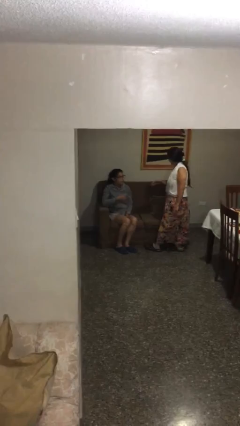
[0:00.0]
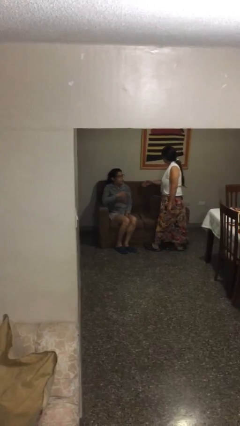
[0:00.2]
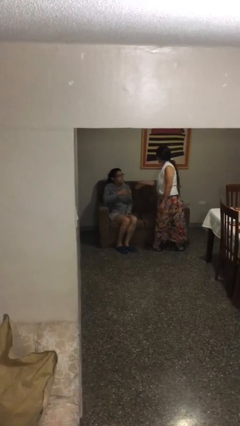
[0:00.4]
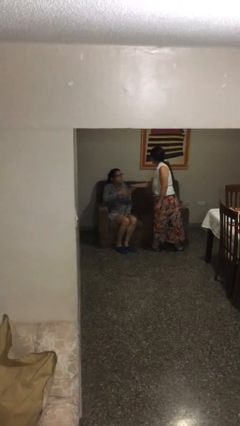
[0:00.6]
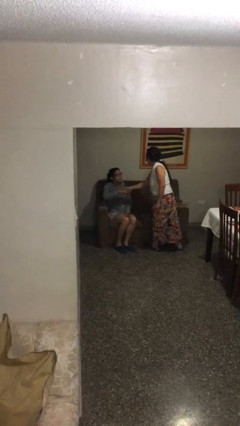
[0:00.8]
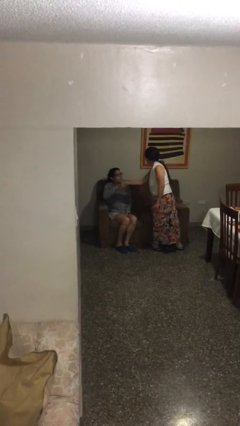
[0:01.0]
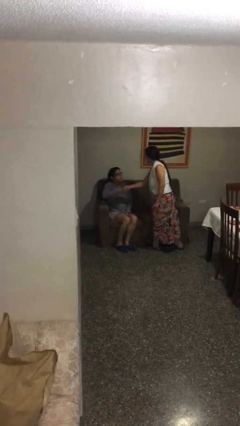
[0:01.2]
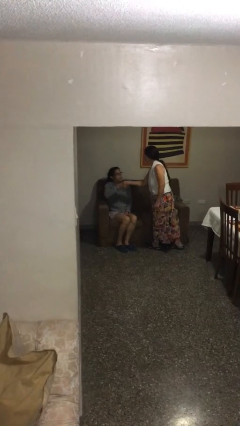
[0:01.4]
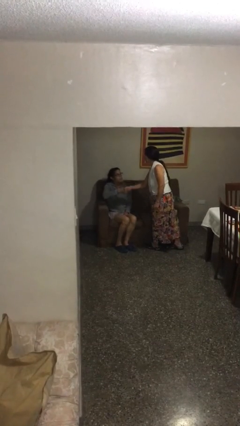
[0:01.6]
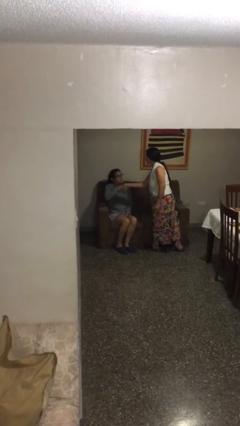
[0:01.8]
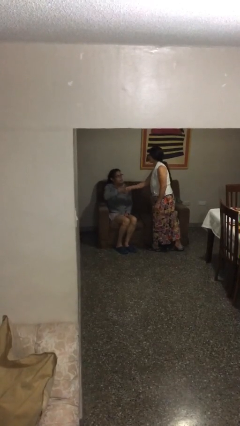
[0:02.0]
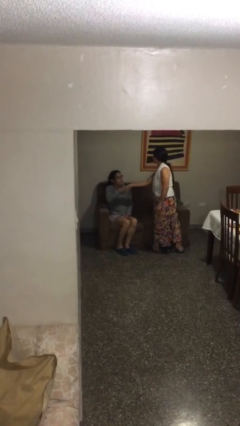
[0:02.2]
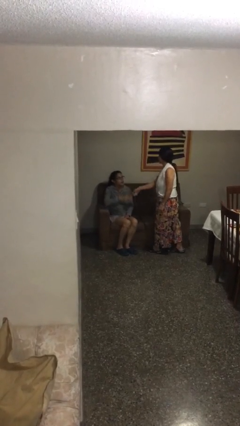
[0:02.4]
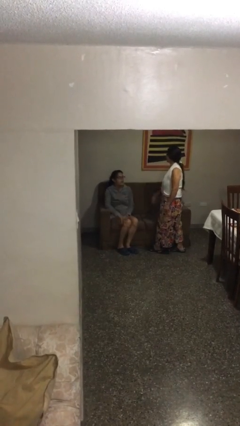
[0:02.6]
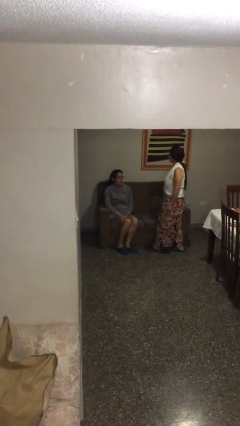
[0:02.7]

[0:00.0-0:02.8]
person shakes hand

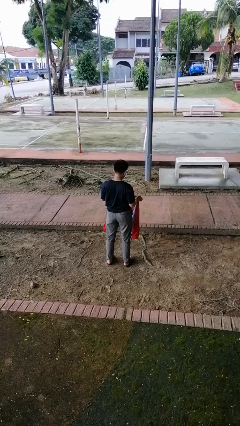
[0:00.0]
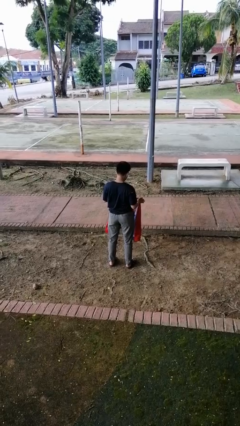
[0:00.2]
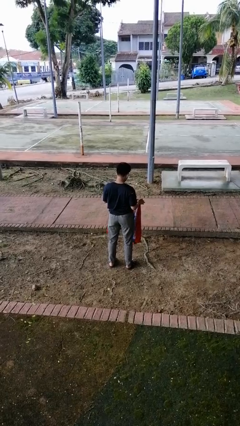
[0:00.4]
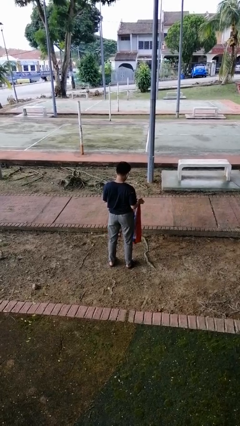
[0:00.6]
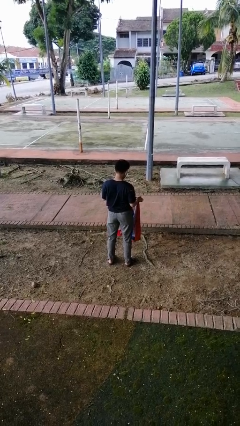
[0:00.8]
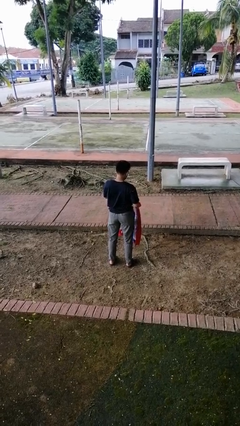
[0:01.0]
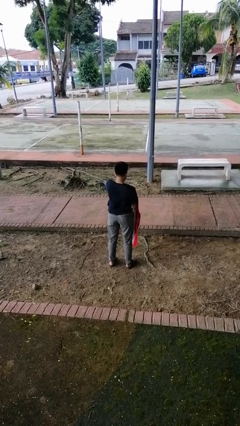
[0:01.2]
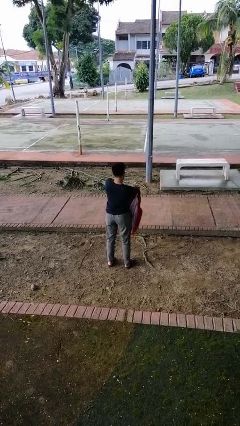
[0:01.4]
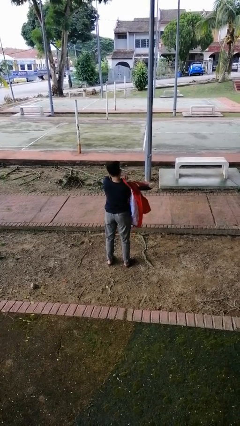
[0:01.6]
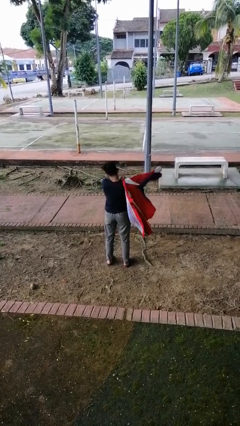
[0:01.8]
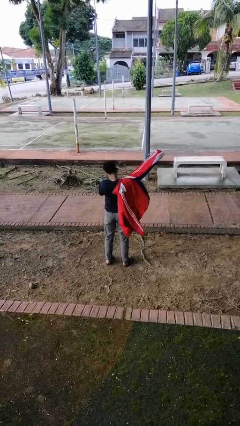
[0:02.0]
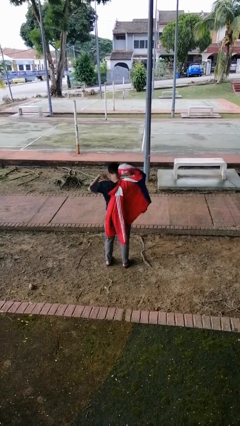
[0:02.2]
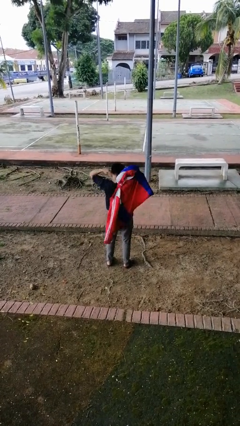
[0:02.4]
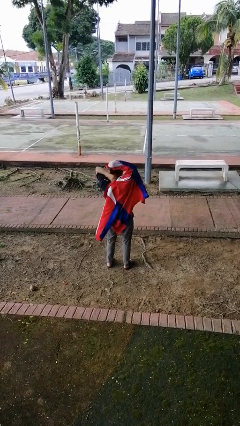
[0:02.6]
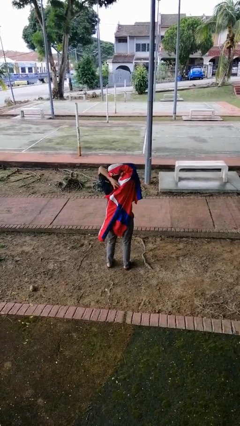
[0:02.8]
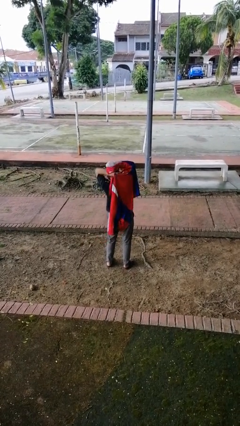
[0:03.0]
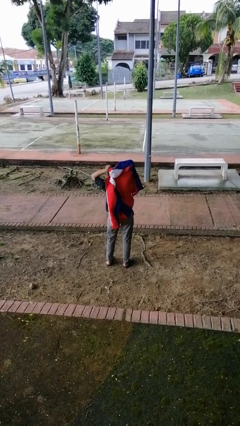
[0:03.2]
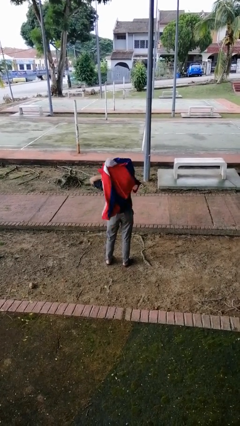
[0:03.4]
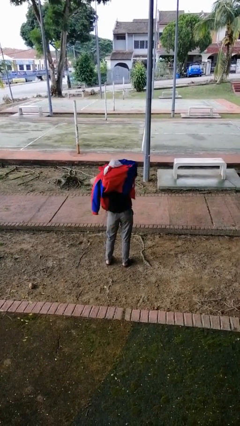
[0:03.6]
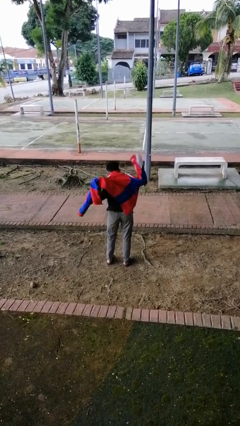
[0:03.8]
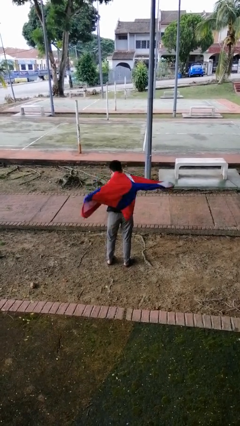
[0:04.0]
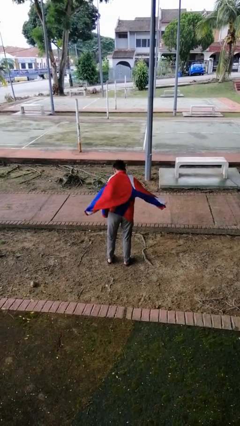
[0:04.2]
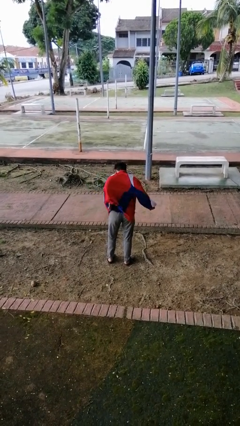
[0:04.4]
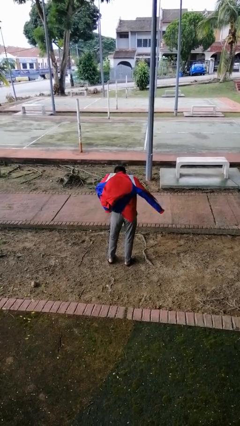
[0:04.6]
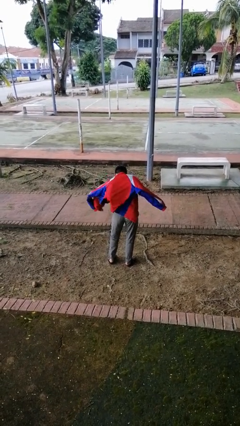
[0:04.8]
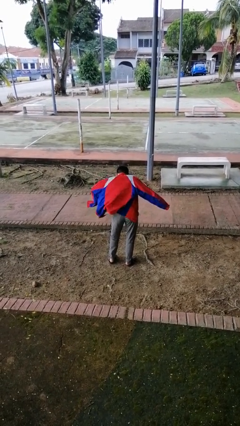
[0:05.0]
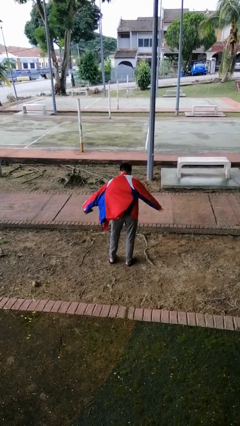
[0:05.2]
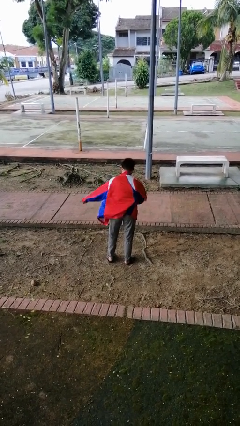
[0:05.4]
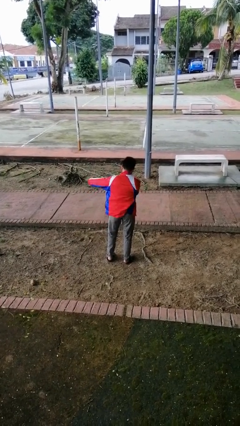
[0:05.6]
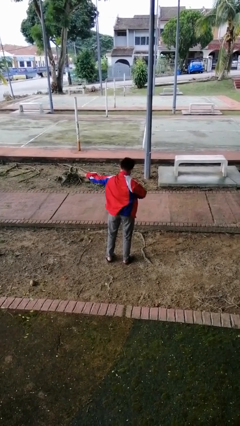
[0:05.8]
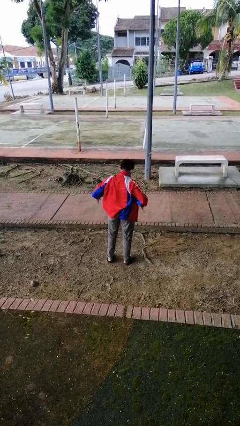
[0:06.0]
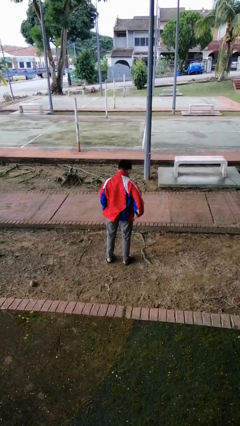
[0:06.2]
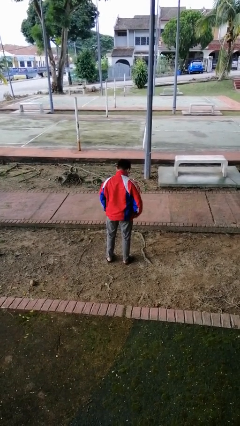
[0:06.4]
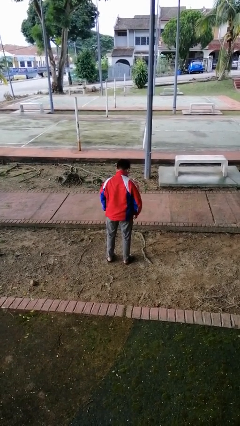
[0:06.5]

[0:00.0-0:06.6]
person puts on jacket

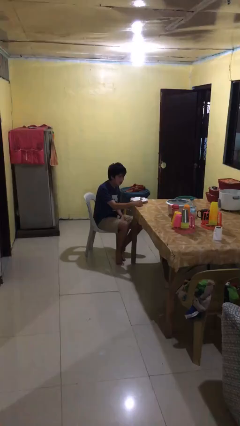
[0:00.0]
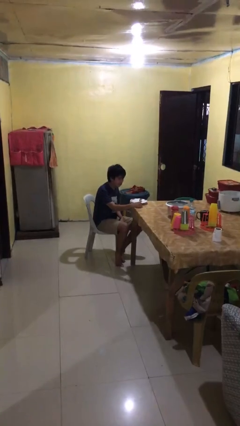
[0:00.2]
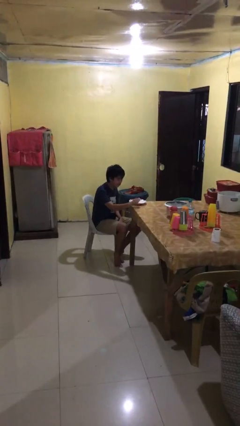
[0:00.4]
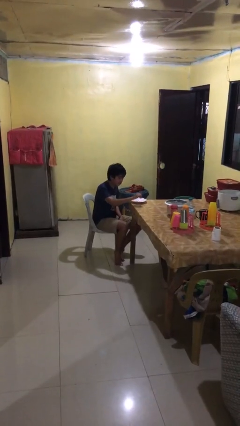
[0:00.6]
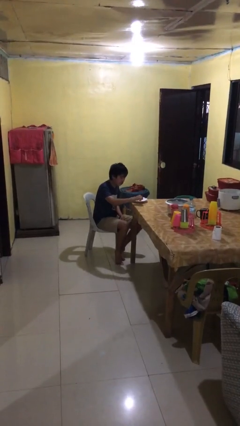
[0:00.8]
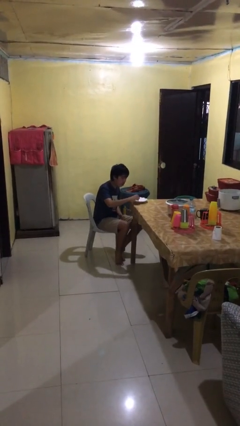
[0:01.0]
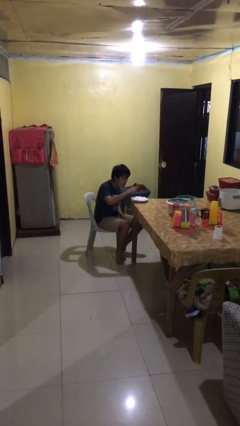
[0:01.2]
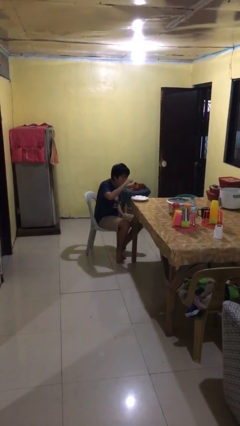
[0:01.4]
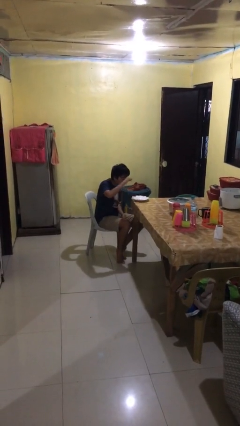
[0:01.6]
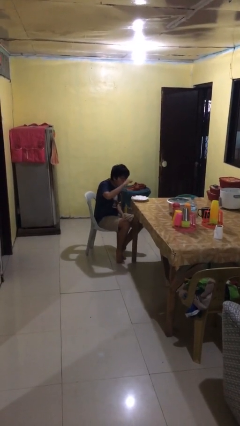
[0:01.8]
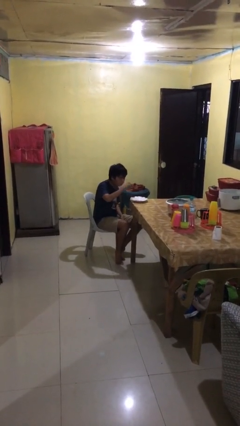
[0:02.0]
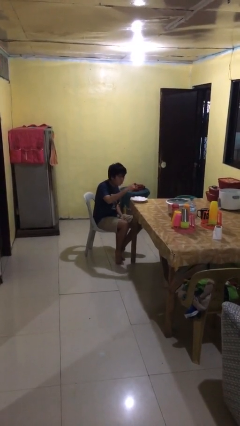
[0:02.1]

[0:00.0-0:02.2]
person eats with utensil

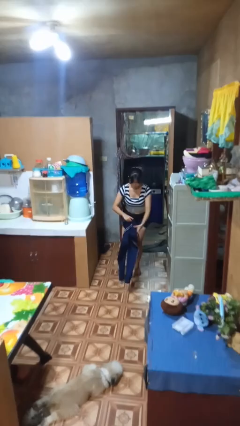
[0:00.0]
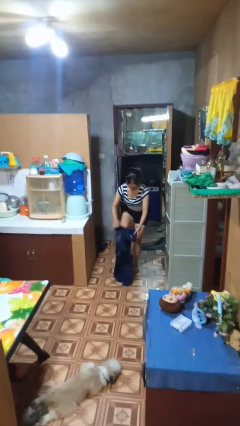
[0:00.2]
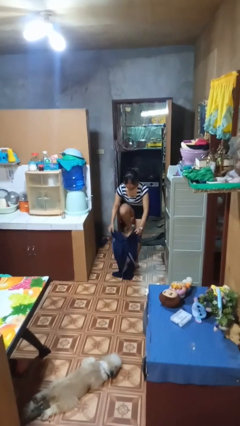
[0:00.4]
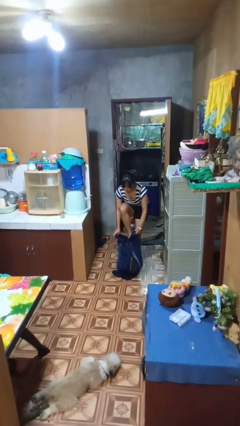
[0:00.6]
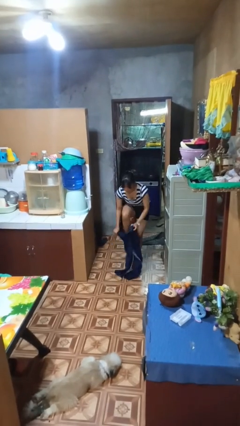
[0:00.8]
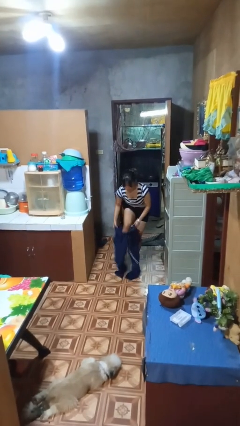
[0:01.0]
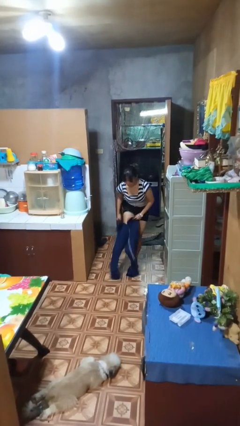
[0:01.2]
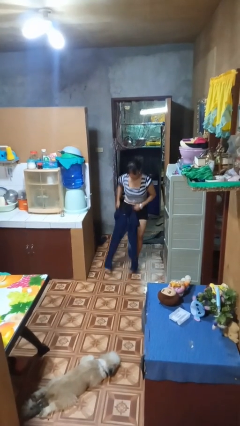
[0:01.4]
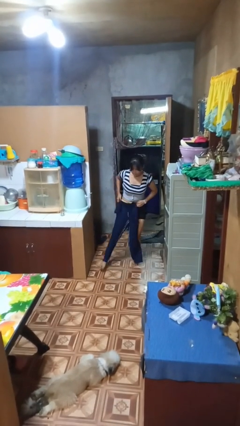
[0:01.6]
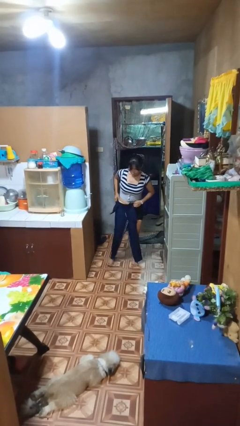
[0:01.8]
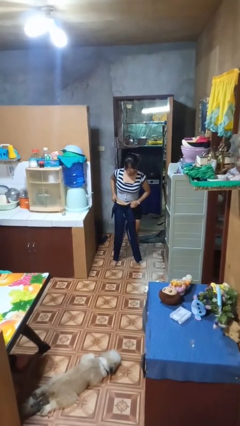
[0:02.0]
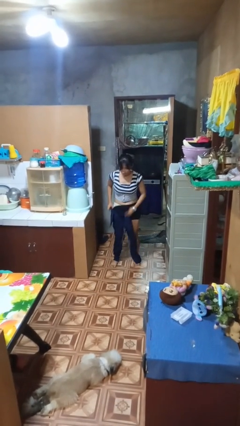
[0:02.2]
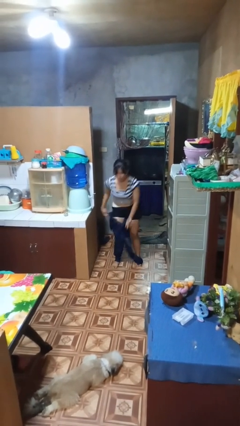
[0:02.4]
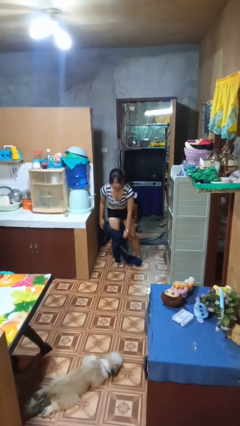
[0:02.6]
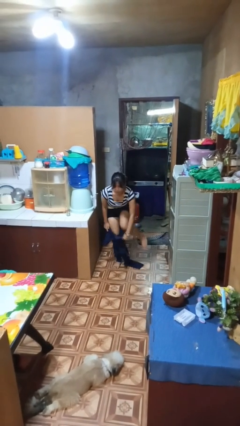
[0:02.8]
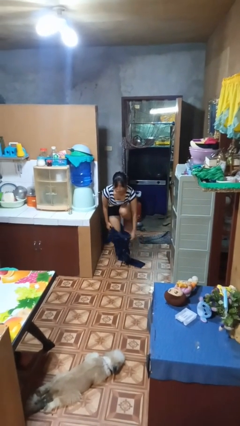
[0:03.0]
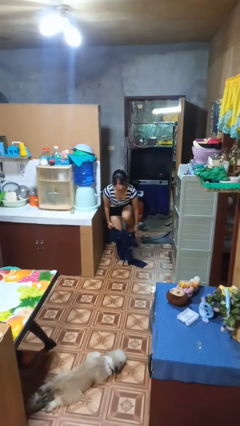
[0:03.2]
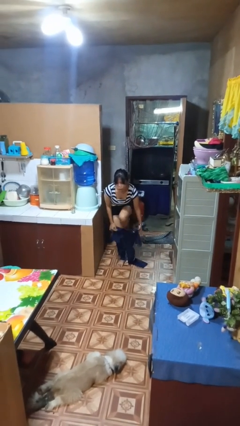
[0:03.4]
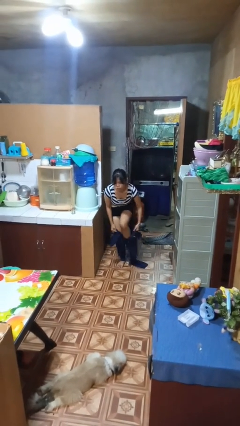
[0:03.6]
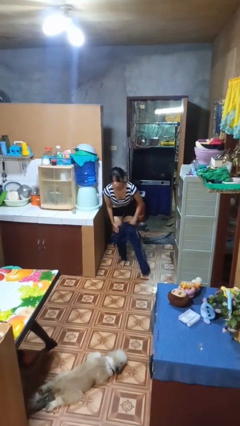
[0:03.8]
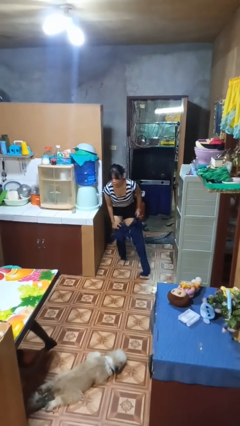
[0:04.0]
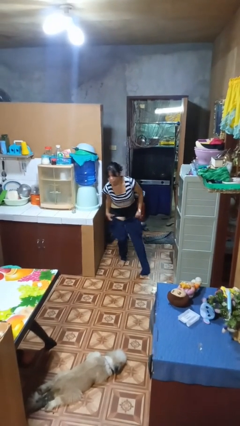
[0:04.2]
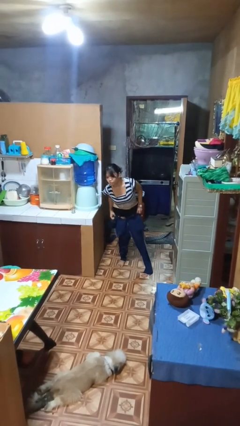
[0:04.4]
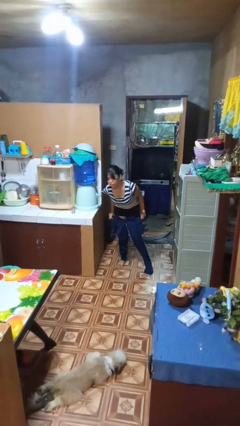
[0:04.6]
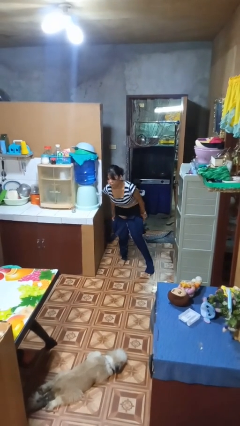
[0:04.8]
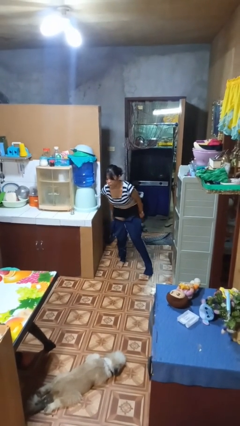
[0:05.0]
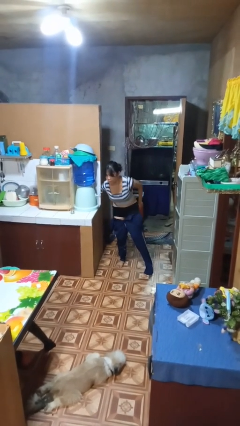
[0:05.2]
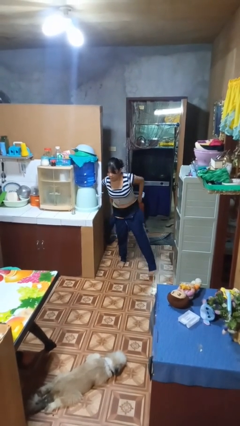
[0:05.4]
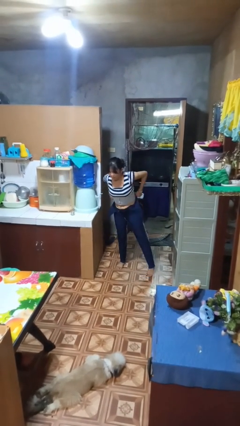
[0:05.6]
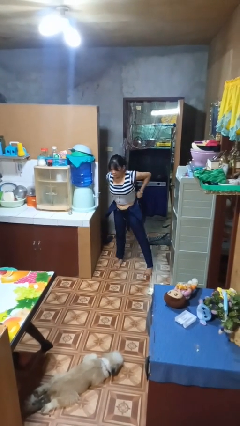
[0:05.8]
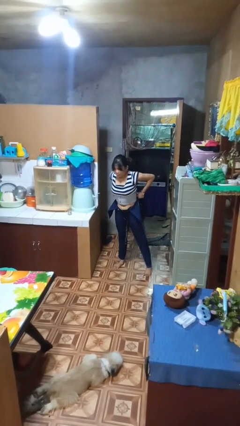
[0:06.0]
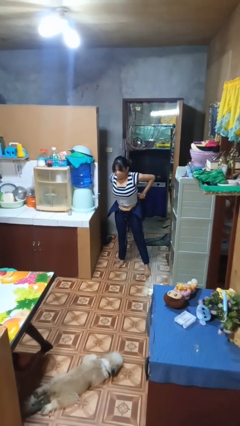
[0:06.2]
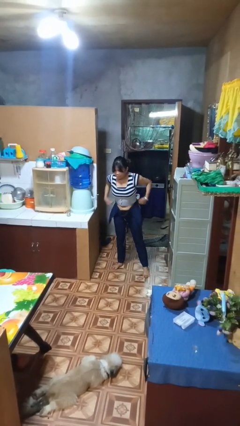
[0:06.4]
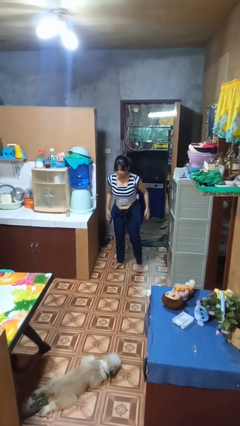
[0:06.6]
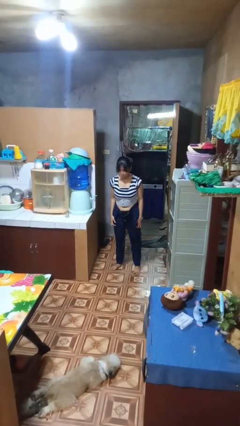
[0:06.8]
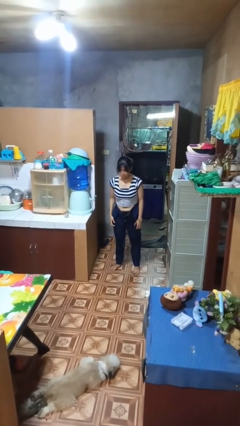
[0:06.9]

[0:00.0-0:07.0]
person puts on pants
